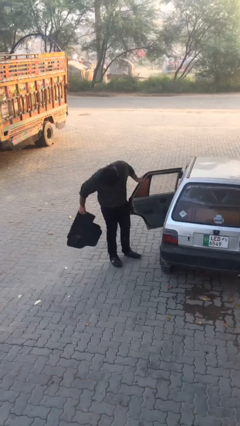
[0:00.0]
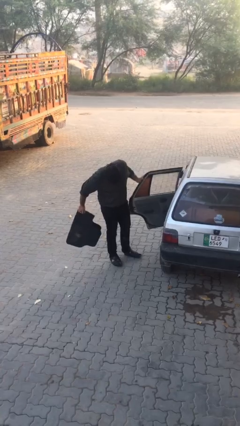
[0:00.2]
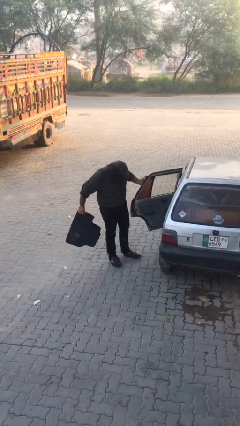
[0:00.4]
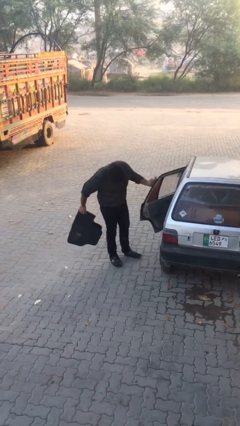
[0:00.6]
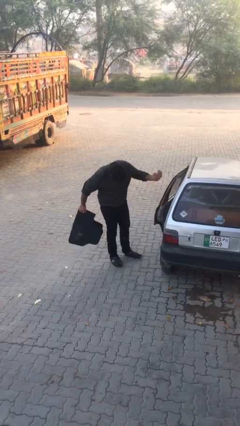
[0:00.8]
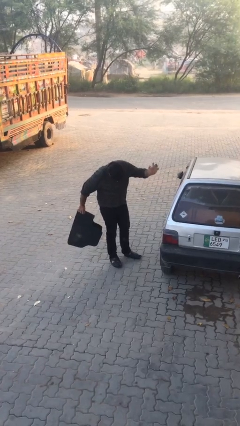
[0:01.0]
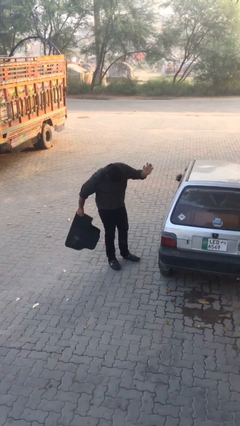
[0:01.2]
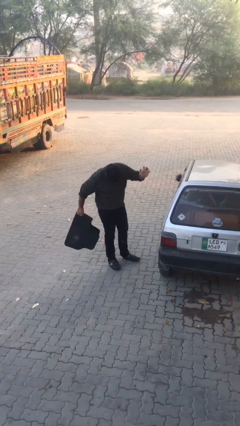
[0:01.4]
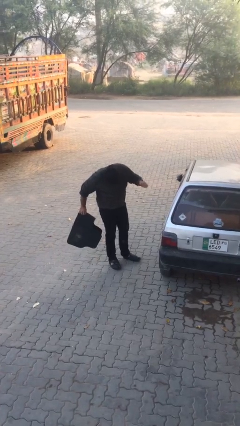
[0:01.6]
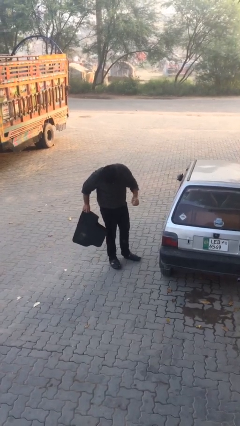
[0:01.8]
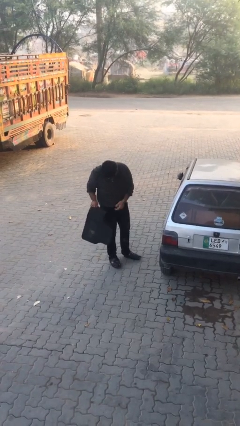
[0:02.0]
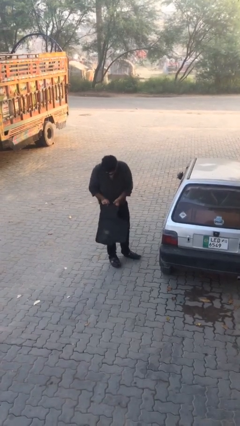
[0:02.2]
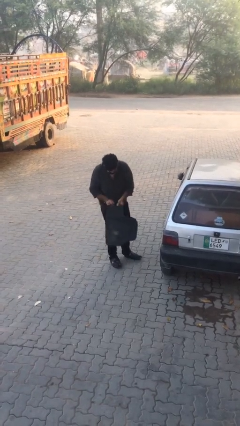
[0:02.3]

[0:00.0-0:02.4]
person closes car door

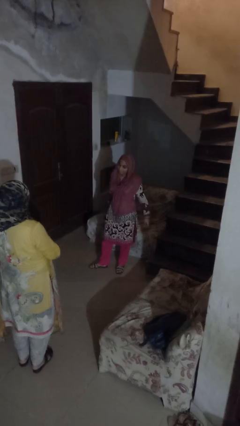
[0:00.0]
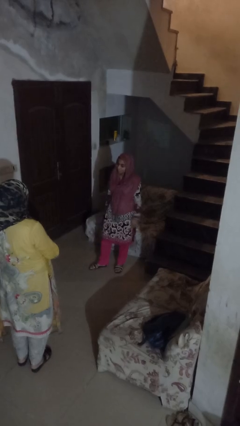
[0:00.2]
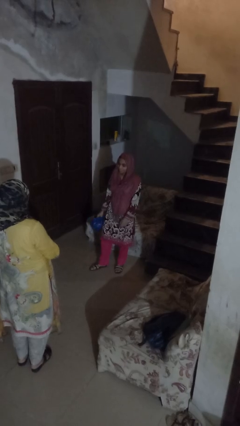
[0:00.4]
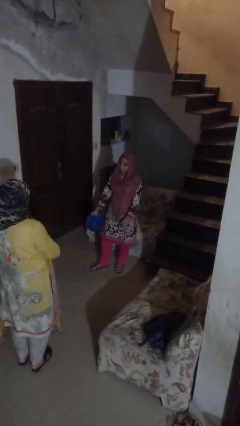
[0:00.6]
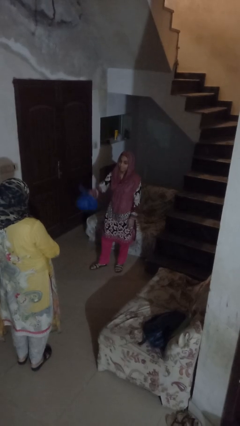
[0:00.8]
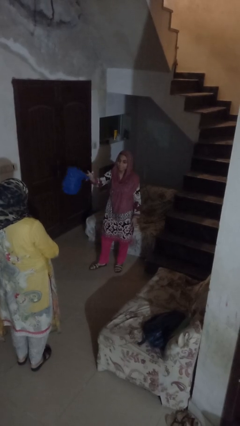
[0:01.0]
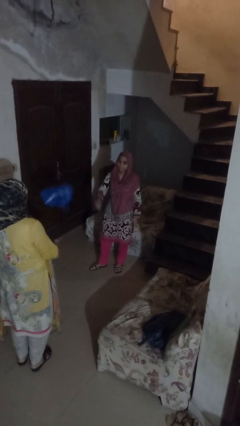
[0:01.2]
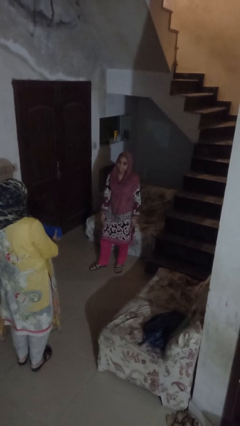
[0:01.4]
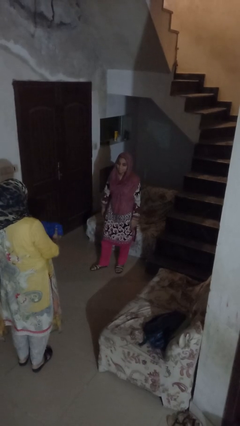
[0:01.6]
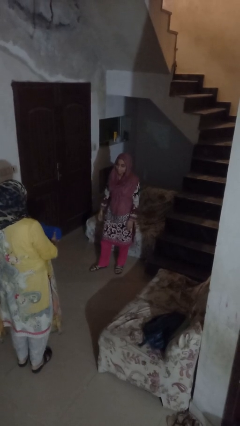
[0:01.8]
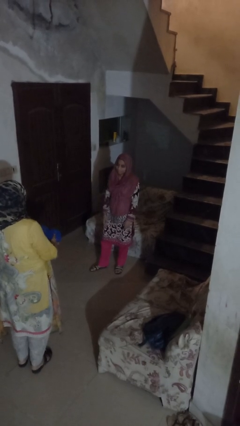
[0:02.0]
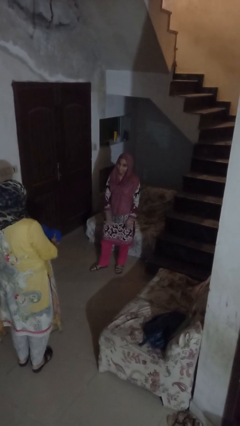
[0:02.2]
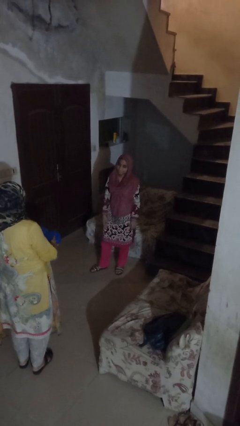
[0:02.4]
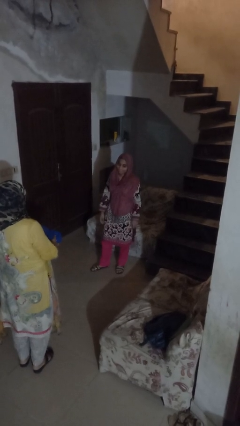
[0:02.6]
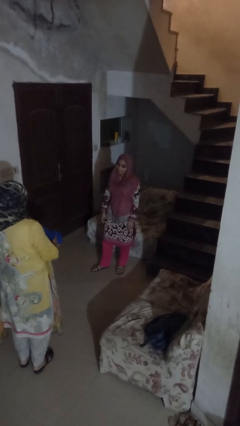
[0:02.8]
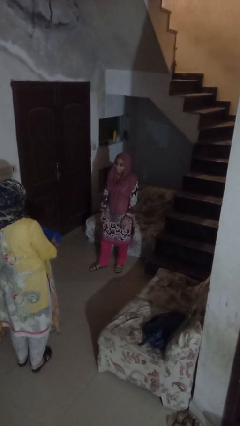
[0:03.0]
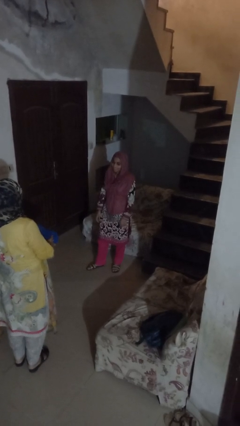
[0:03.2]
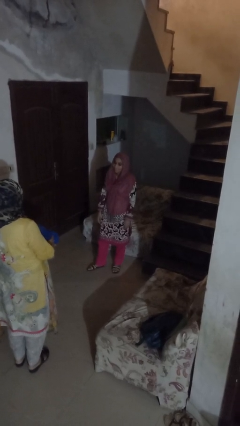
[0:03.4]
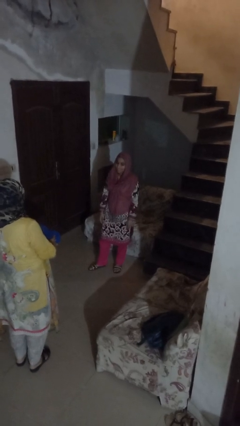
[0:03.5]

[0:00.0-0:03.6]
person throws object to person

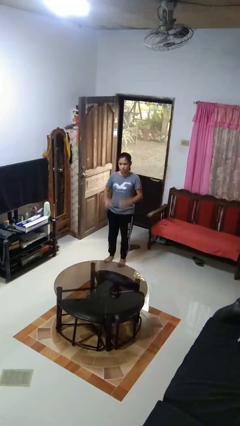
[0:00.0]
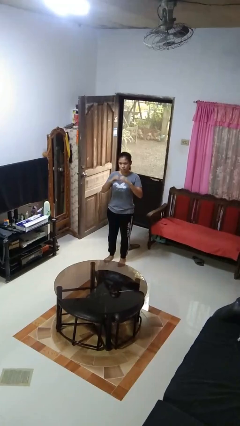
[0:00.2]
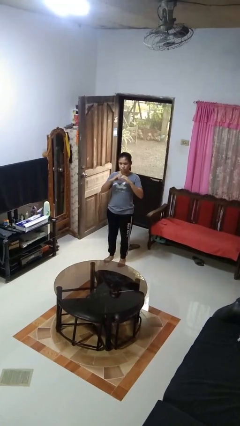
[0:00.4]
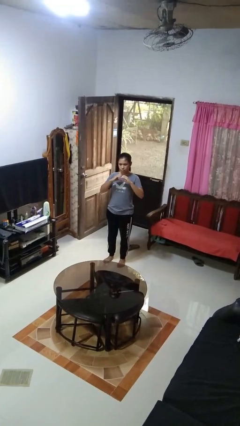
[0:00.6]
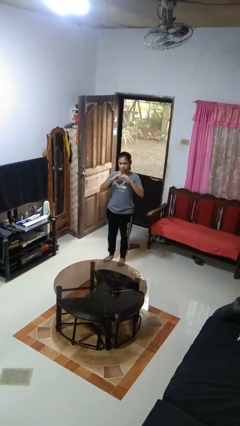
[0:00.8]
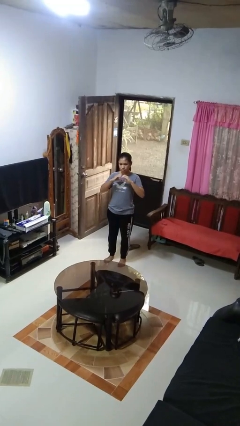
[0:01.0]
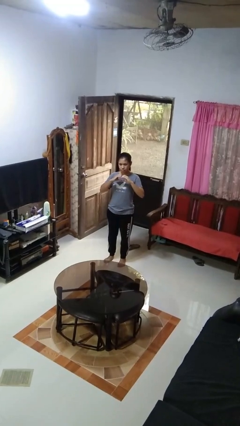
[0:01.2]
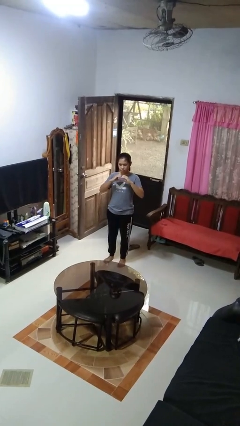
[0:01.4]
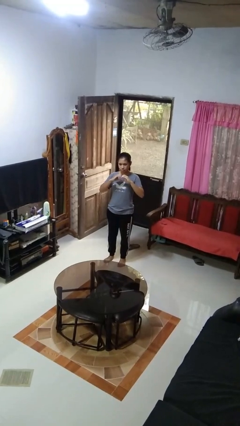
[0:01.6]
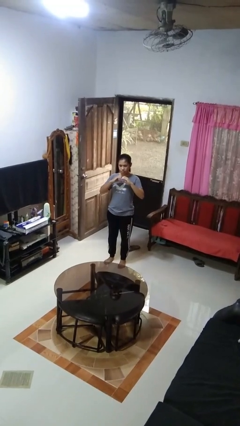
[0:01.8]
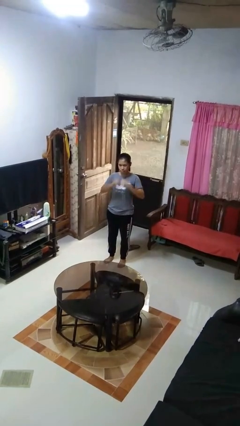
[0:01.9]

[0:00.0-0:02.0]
person gestures heart

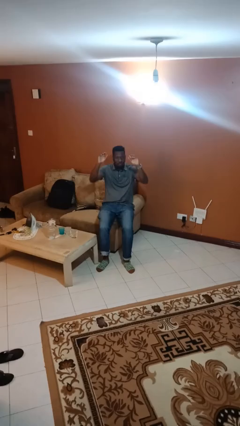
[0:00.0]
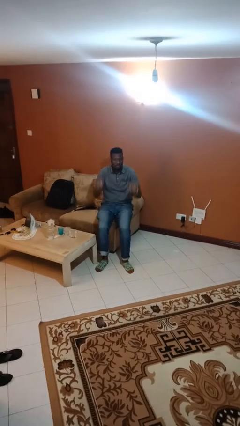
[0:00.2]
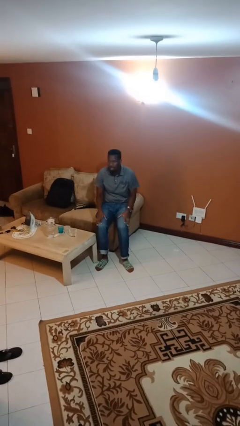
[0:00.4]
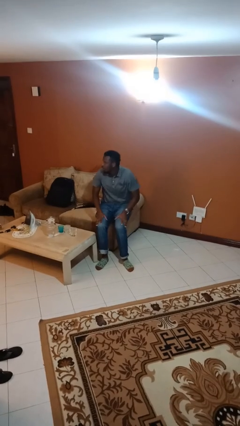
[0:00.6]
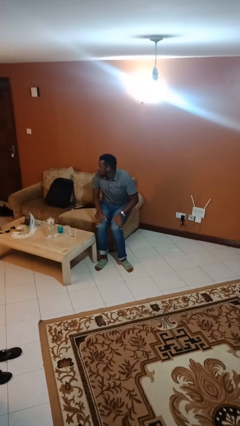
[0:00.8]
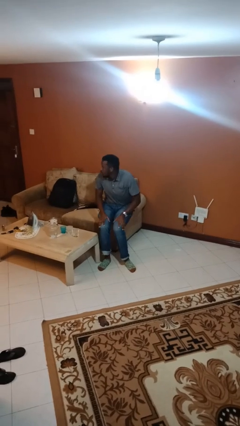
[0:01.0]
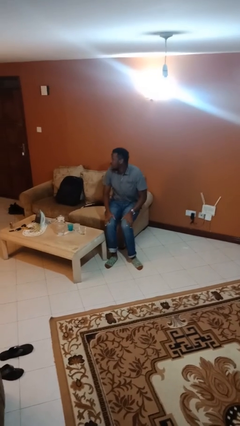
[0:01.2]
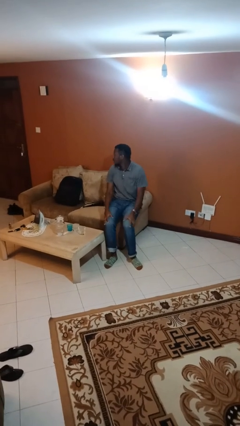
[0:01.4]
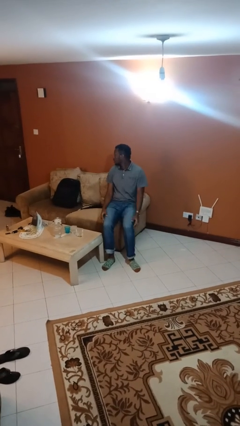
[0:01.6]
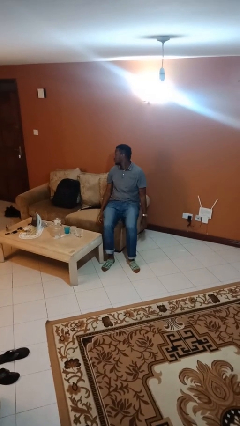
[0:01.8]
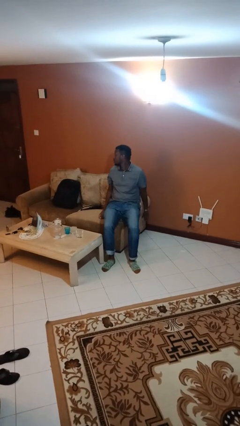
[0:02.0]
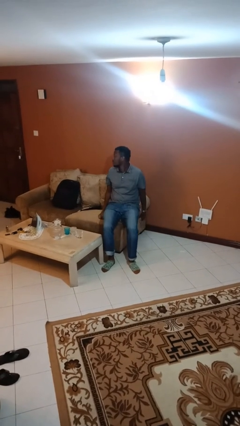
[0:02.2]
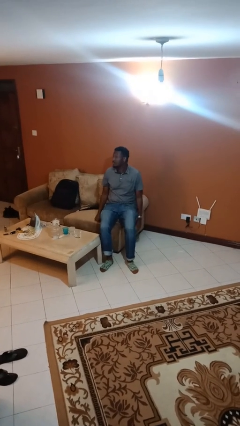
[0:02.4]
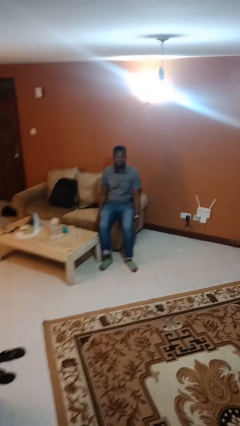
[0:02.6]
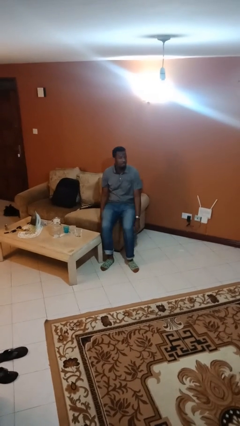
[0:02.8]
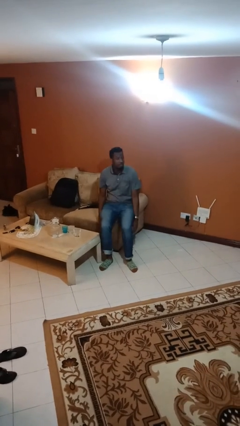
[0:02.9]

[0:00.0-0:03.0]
person slaps hands on thighs

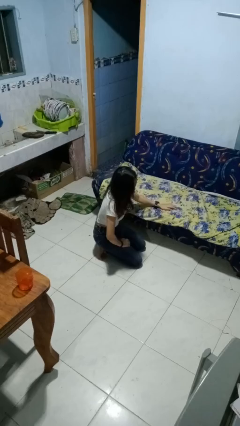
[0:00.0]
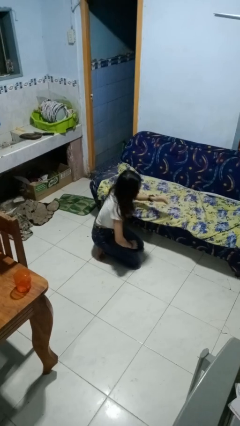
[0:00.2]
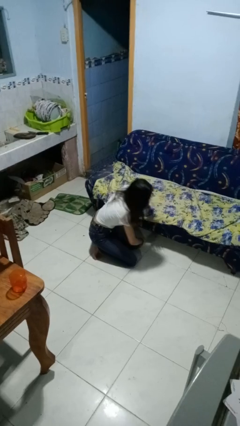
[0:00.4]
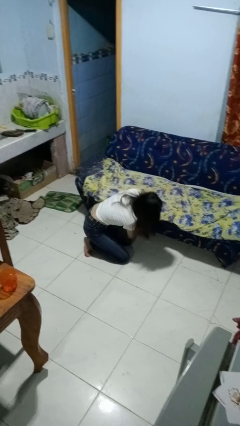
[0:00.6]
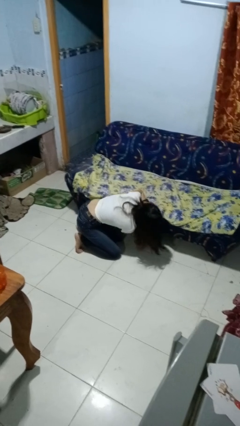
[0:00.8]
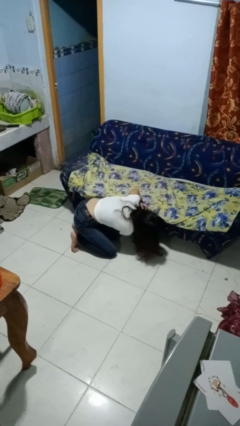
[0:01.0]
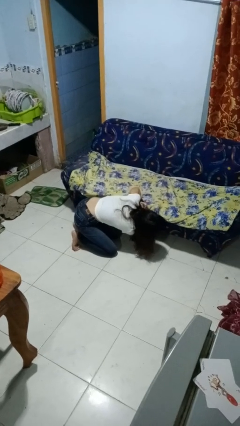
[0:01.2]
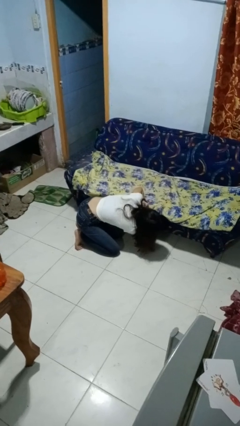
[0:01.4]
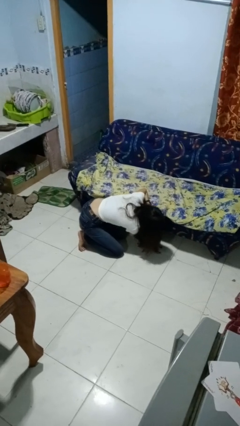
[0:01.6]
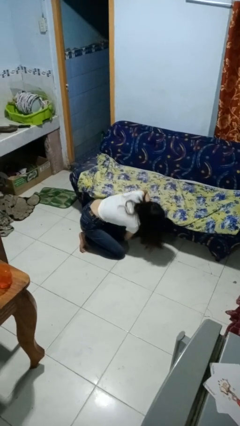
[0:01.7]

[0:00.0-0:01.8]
person searches under couch

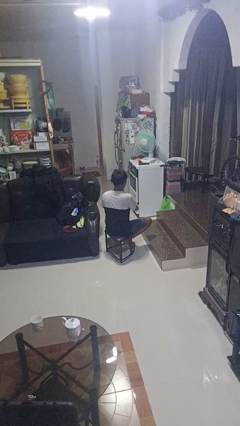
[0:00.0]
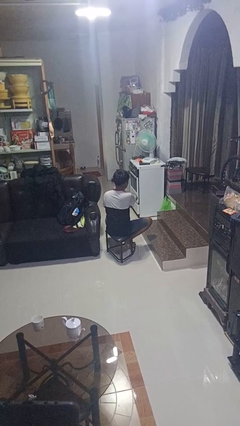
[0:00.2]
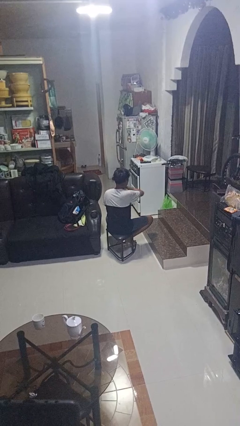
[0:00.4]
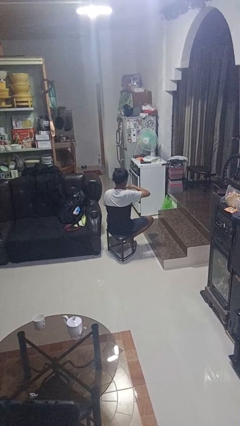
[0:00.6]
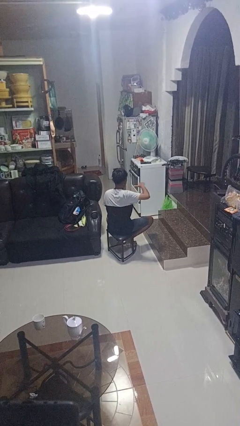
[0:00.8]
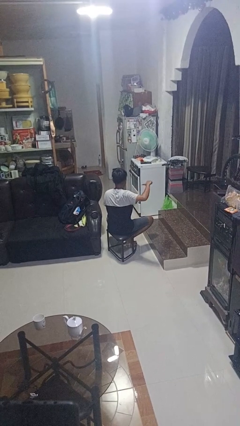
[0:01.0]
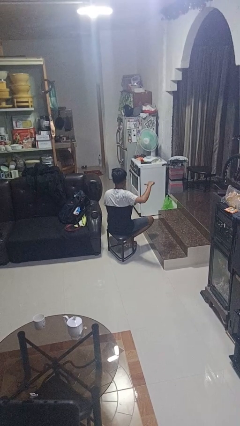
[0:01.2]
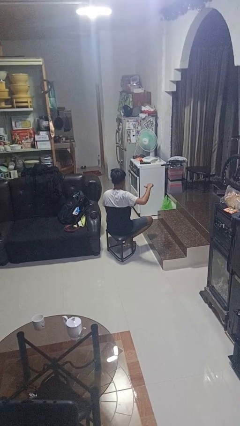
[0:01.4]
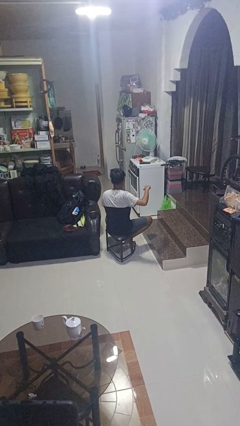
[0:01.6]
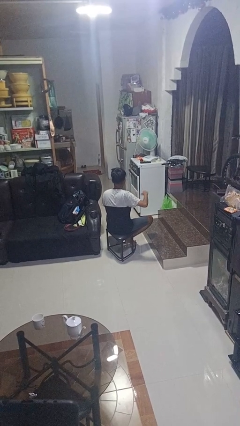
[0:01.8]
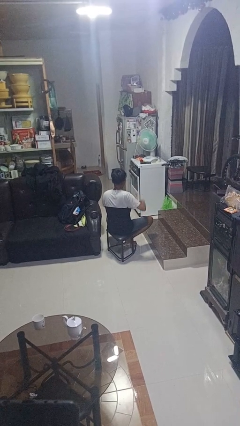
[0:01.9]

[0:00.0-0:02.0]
person gestures cut

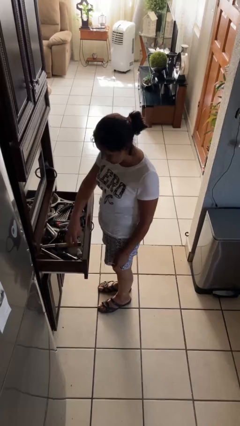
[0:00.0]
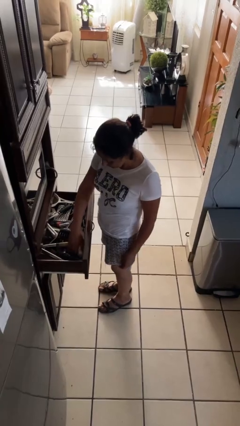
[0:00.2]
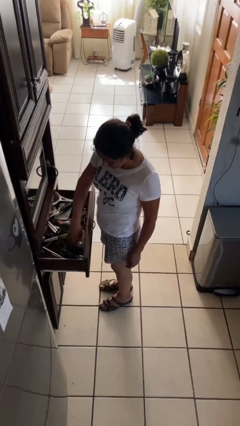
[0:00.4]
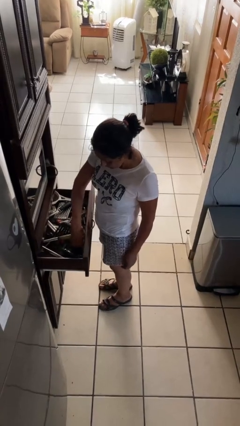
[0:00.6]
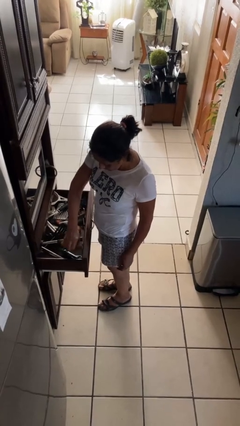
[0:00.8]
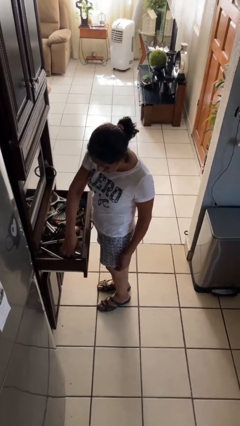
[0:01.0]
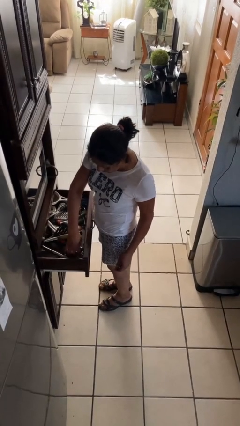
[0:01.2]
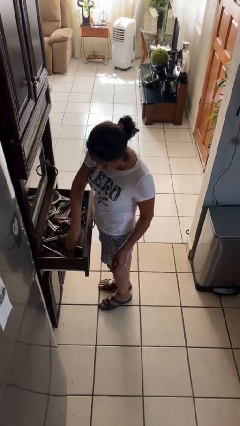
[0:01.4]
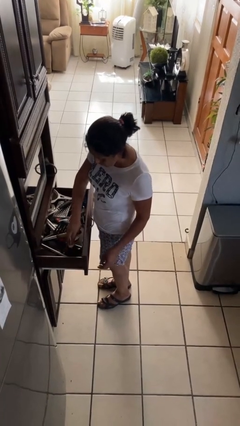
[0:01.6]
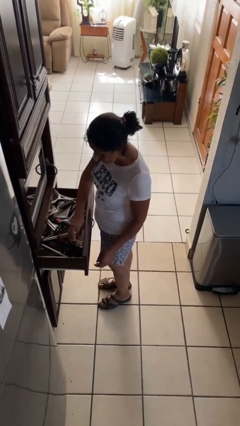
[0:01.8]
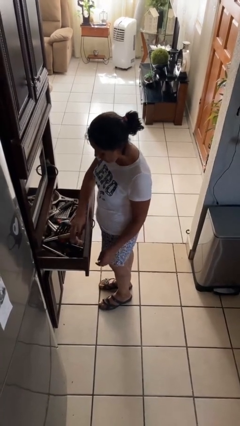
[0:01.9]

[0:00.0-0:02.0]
person searches in kitchen drawer
